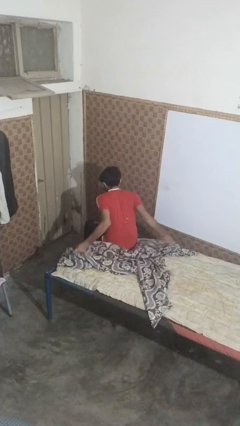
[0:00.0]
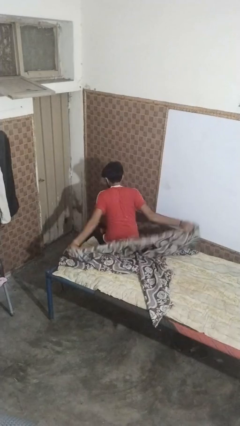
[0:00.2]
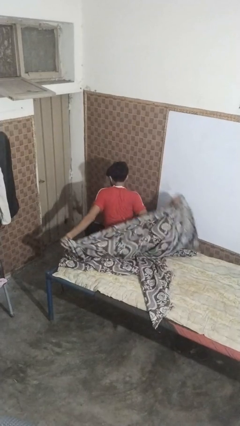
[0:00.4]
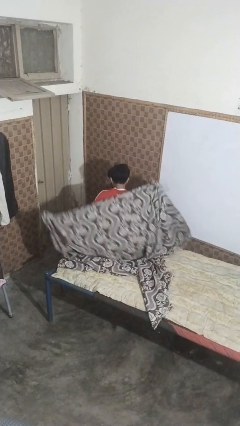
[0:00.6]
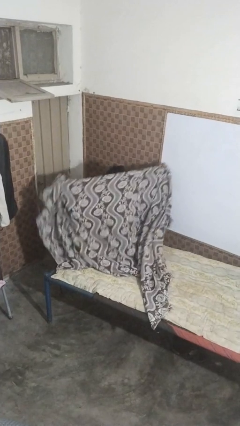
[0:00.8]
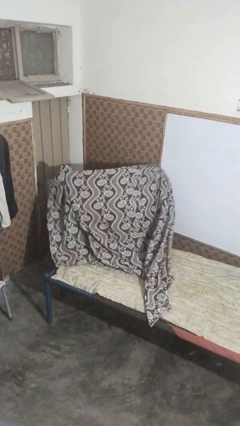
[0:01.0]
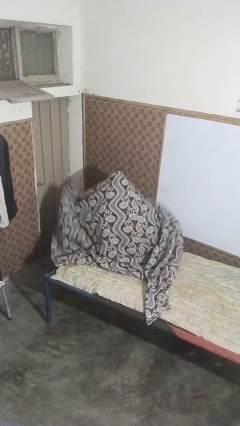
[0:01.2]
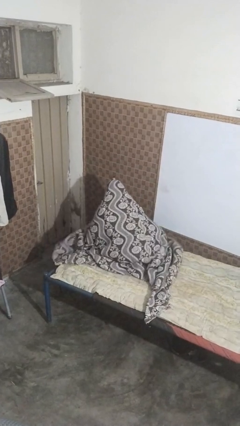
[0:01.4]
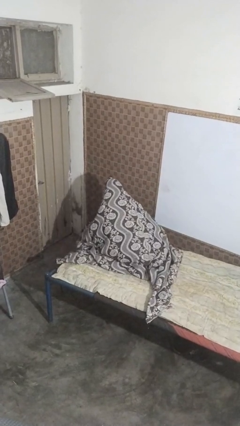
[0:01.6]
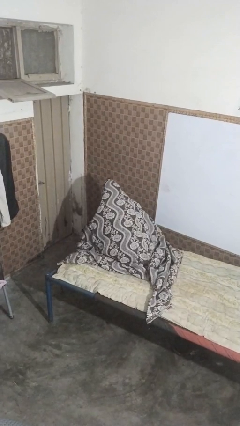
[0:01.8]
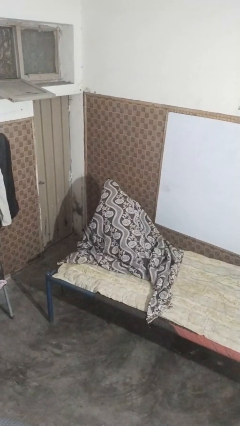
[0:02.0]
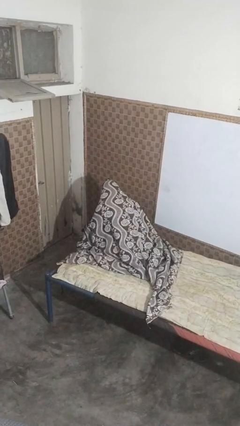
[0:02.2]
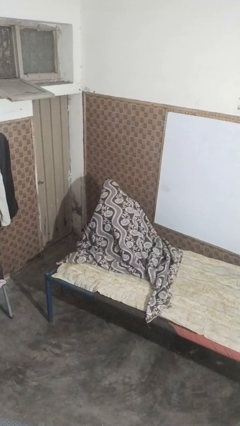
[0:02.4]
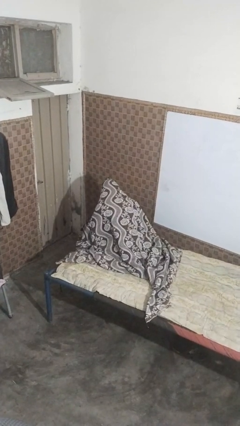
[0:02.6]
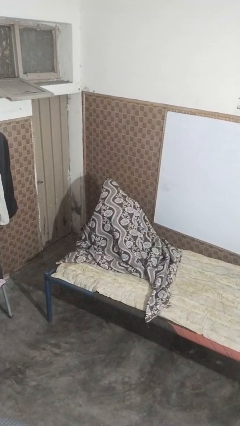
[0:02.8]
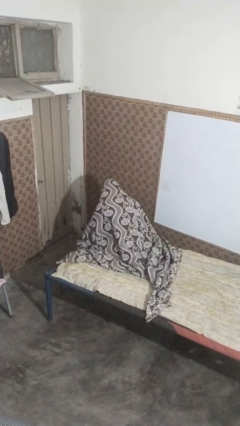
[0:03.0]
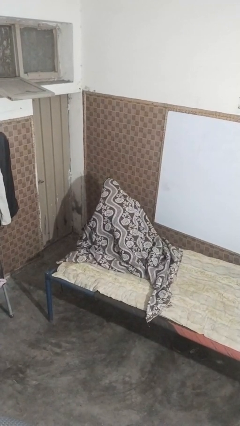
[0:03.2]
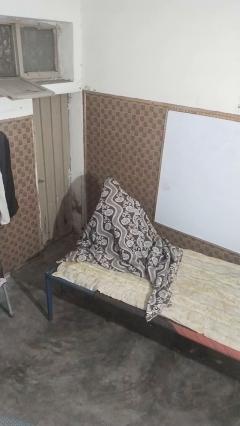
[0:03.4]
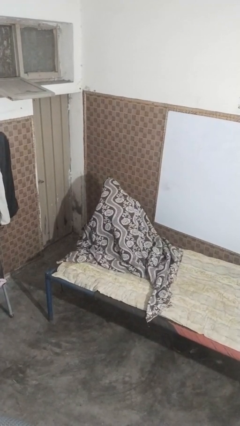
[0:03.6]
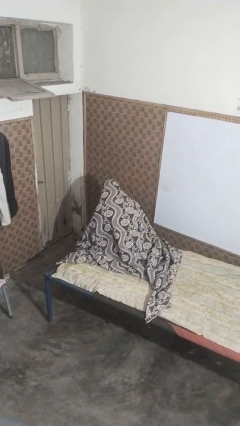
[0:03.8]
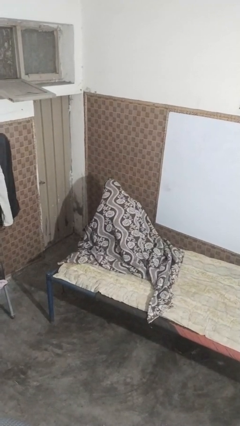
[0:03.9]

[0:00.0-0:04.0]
person covers with bedsheets

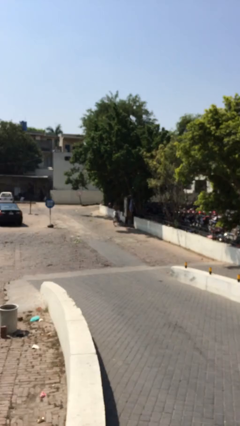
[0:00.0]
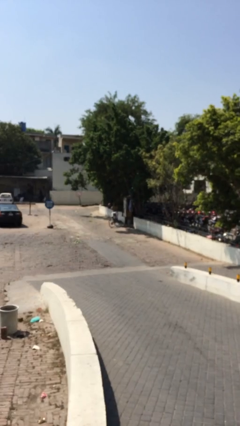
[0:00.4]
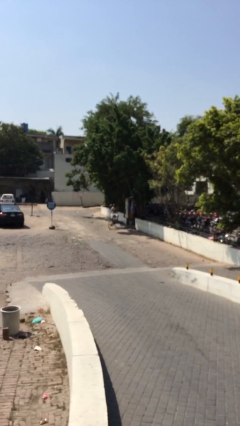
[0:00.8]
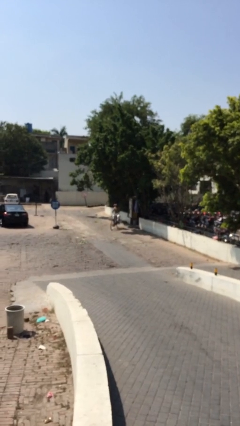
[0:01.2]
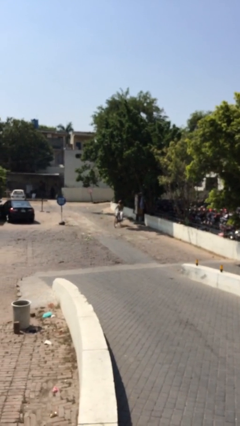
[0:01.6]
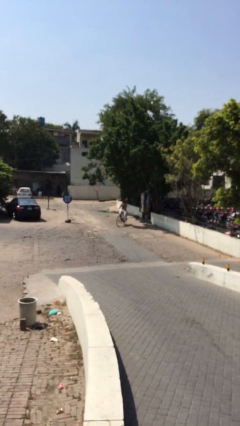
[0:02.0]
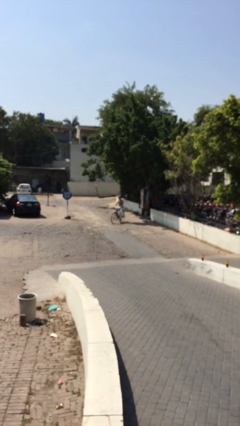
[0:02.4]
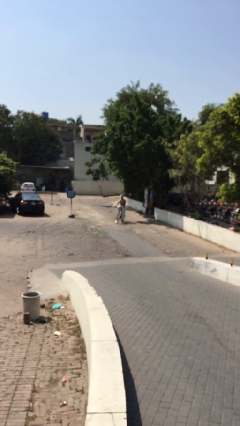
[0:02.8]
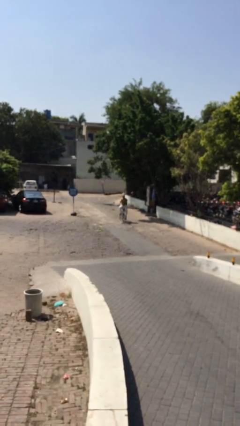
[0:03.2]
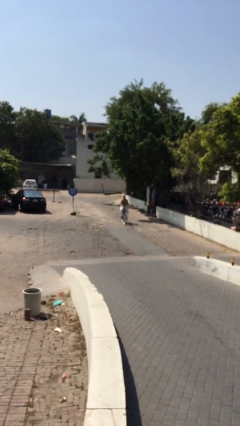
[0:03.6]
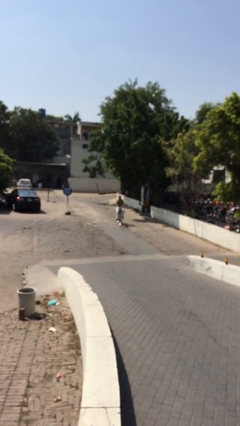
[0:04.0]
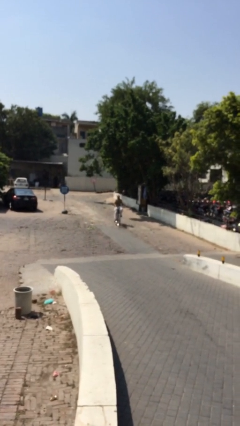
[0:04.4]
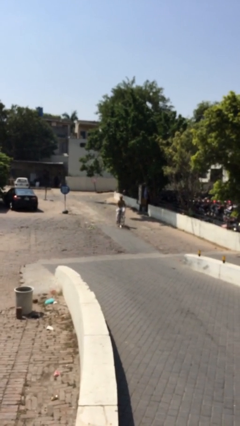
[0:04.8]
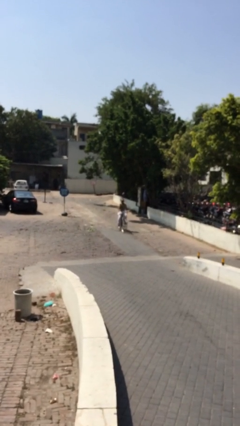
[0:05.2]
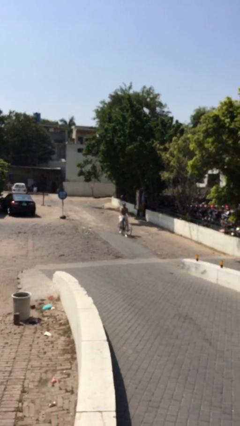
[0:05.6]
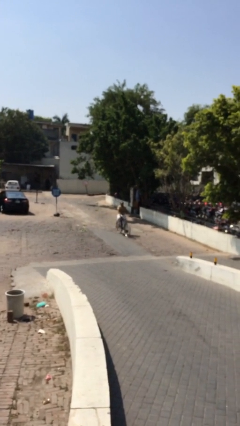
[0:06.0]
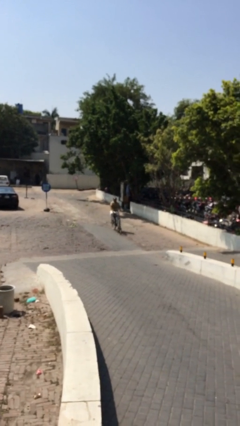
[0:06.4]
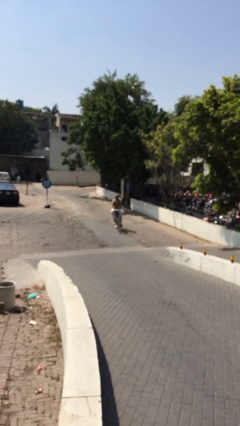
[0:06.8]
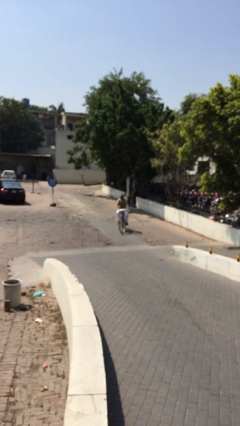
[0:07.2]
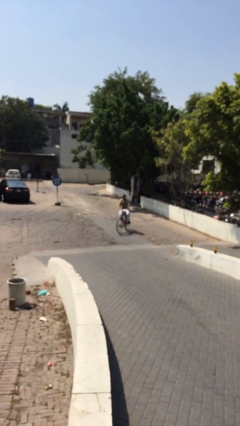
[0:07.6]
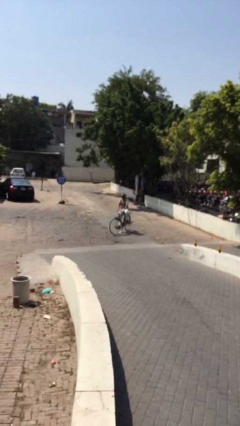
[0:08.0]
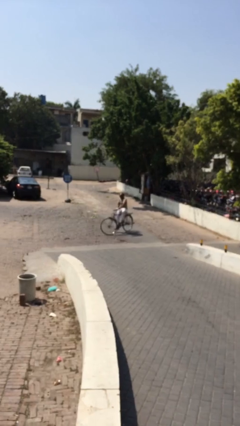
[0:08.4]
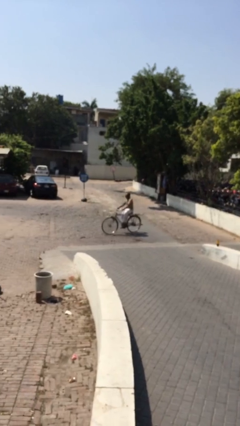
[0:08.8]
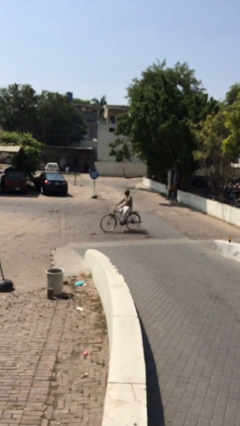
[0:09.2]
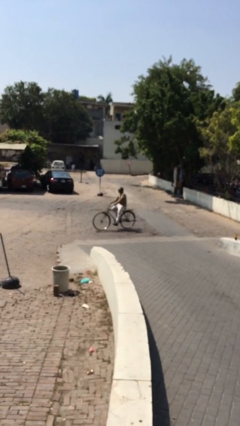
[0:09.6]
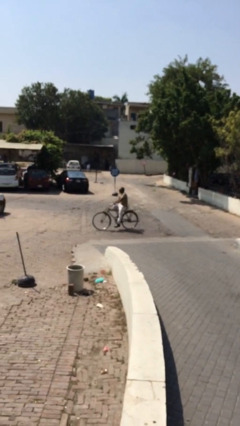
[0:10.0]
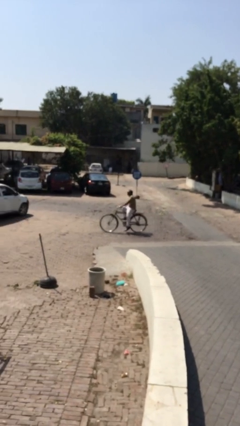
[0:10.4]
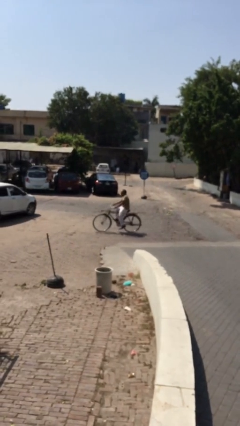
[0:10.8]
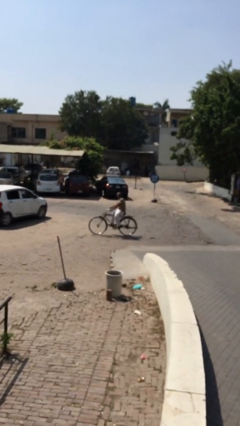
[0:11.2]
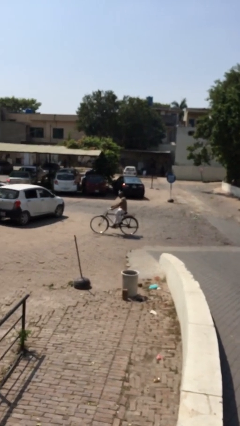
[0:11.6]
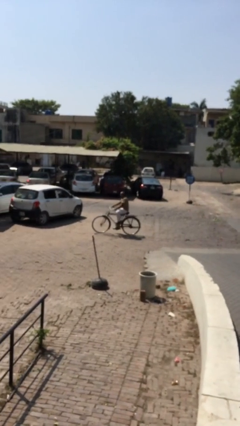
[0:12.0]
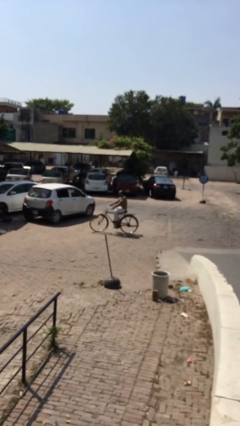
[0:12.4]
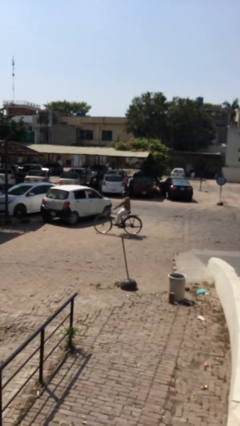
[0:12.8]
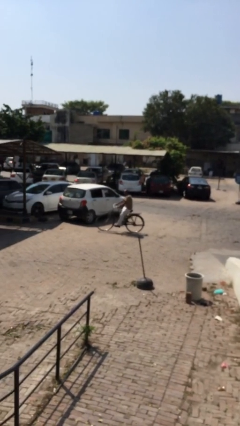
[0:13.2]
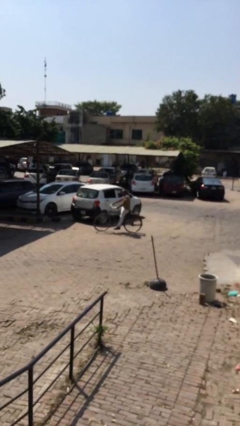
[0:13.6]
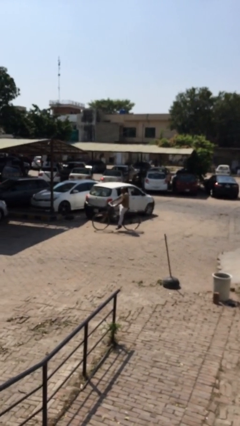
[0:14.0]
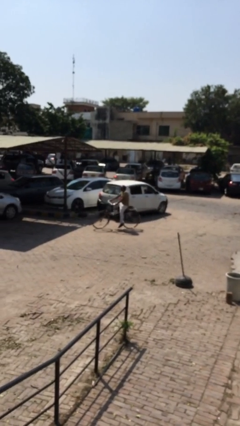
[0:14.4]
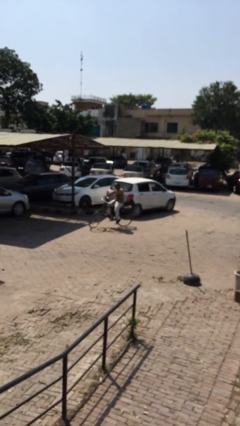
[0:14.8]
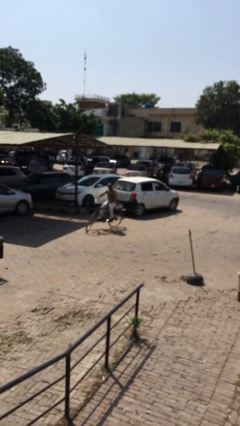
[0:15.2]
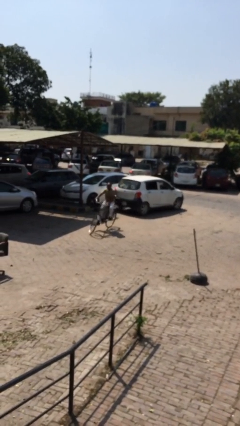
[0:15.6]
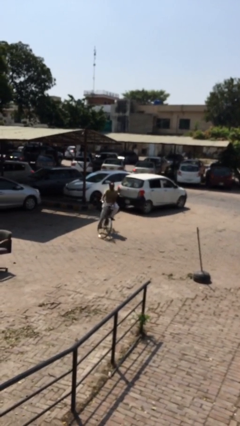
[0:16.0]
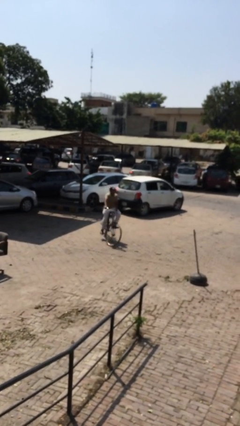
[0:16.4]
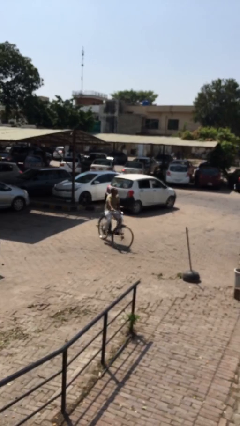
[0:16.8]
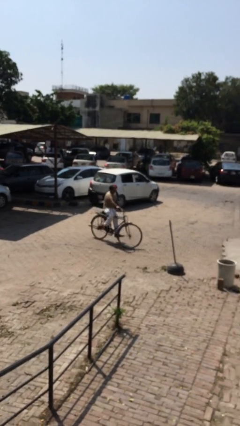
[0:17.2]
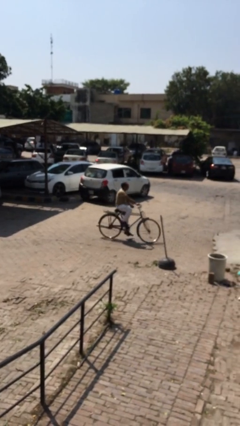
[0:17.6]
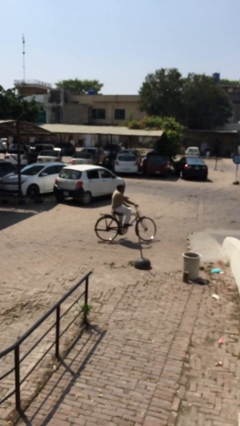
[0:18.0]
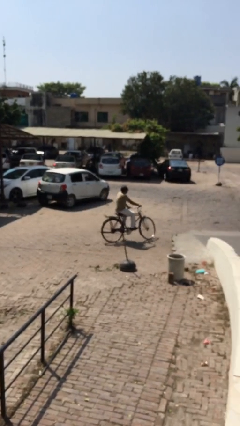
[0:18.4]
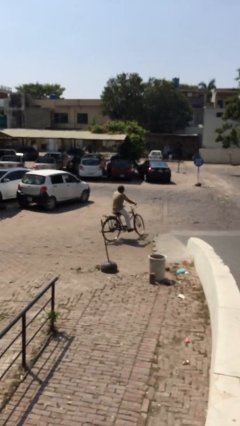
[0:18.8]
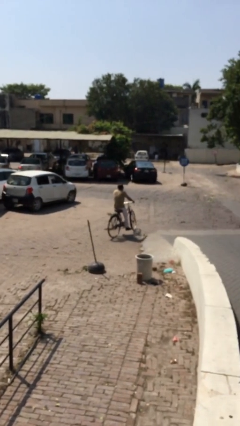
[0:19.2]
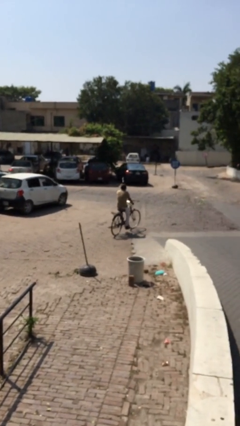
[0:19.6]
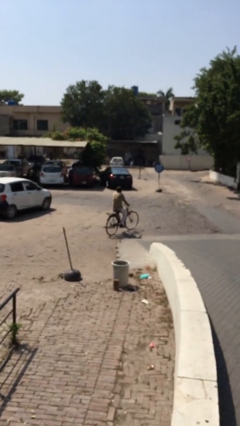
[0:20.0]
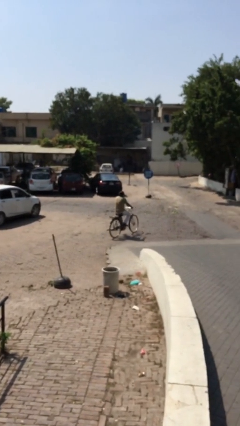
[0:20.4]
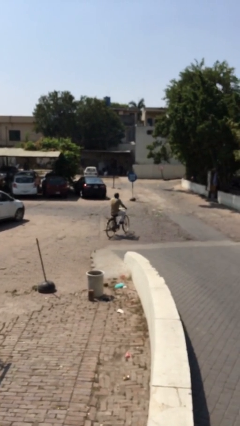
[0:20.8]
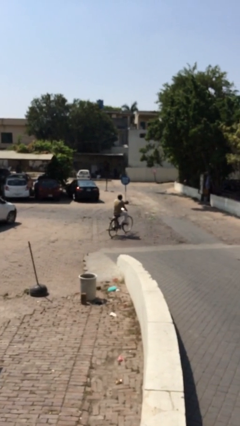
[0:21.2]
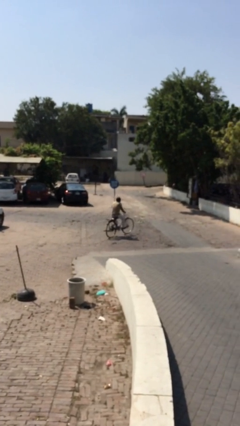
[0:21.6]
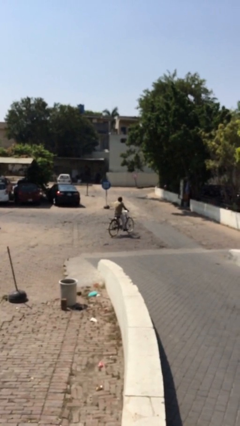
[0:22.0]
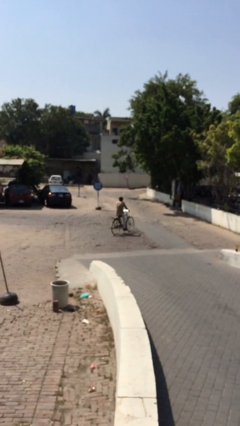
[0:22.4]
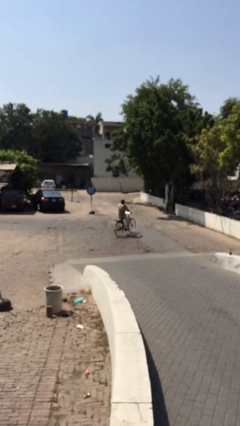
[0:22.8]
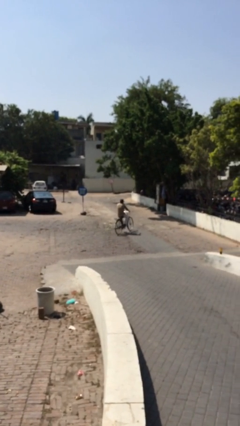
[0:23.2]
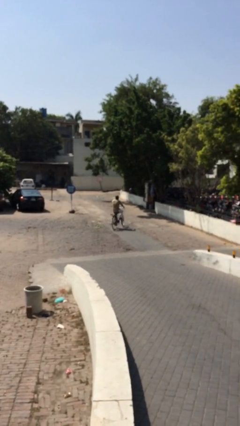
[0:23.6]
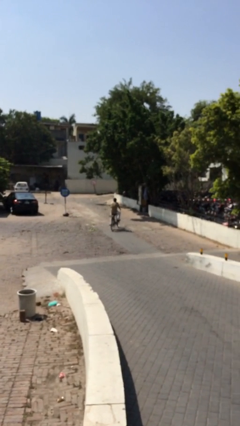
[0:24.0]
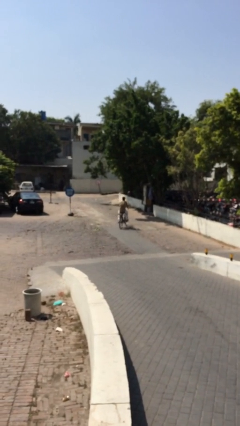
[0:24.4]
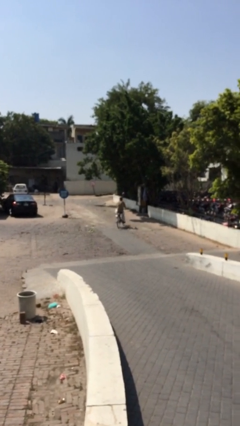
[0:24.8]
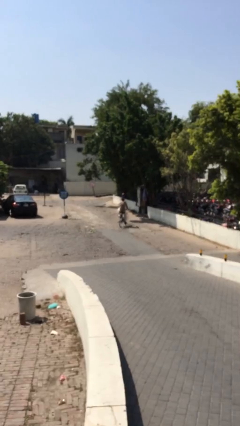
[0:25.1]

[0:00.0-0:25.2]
person rides bicycle

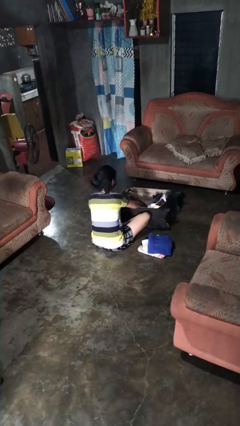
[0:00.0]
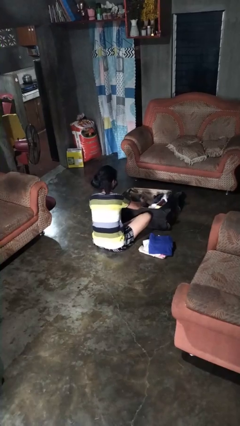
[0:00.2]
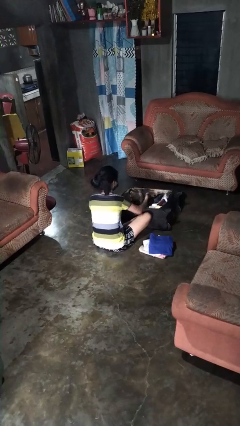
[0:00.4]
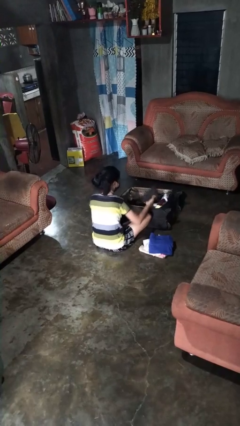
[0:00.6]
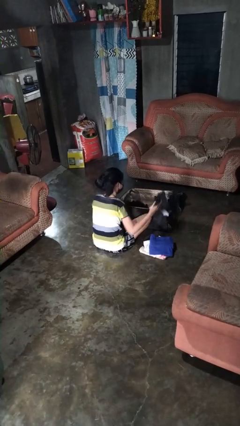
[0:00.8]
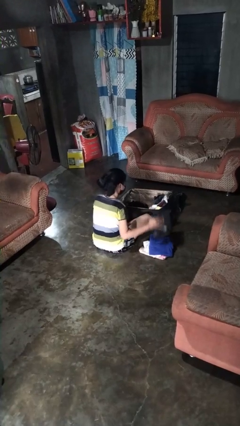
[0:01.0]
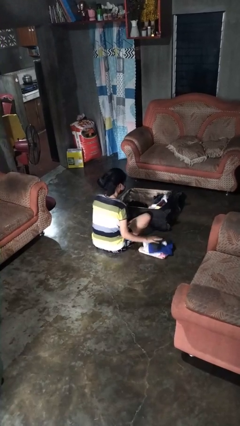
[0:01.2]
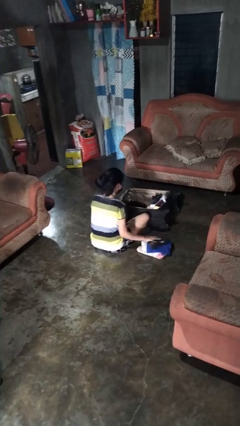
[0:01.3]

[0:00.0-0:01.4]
person unloads clothes from suitcase
